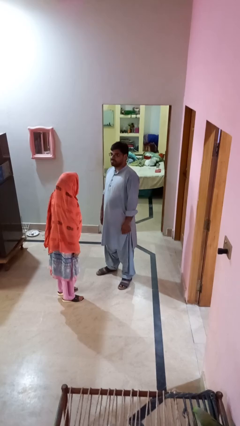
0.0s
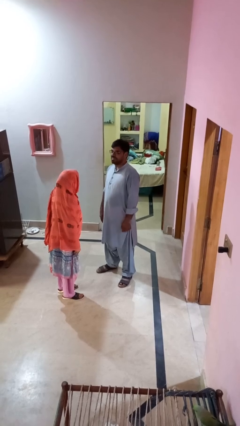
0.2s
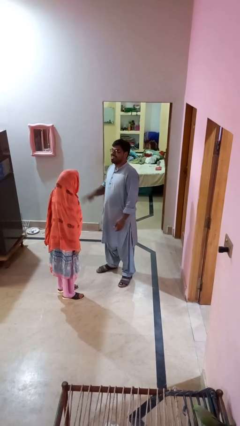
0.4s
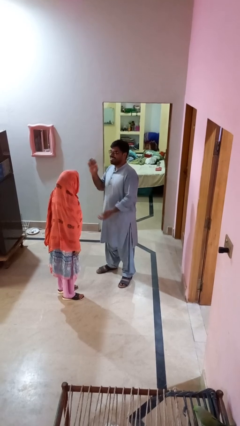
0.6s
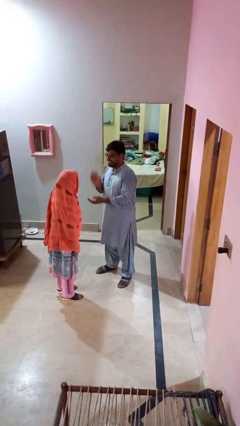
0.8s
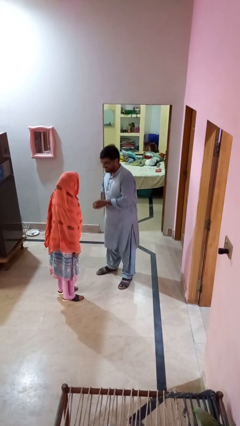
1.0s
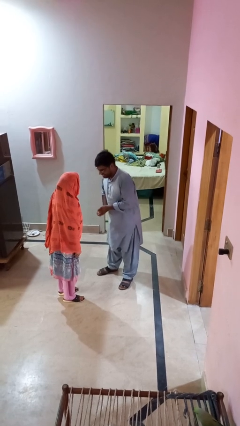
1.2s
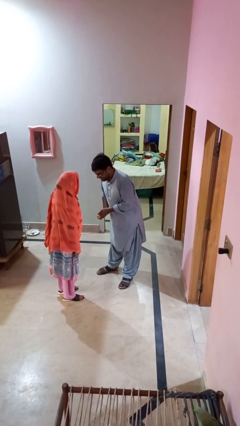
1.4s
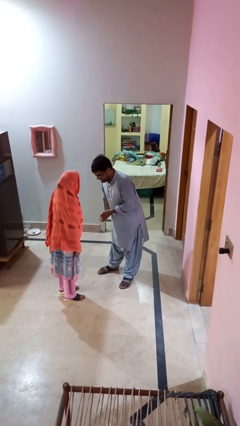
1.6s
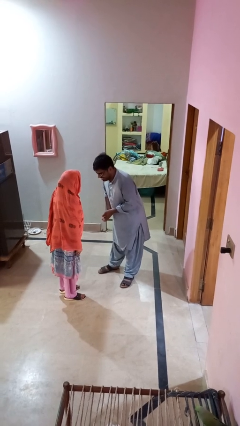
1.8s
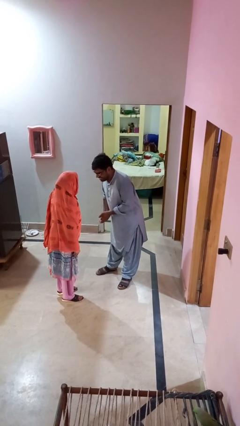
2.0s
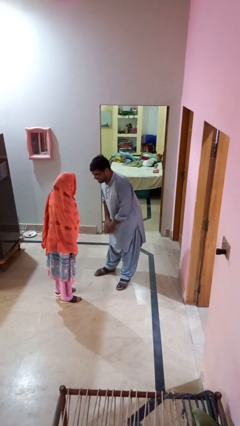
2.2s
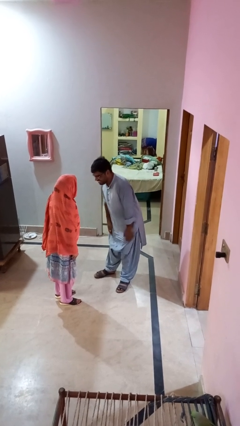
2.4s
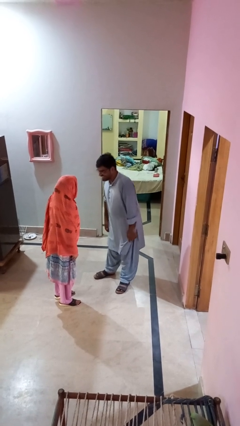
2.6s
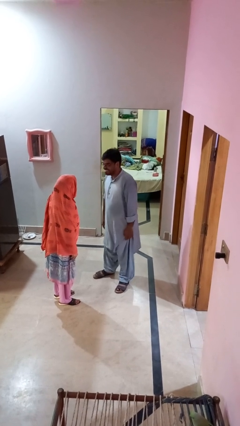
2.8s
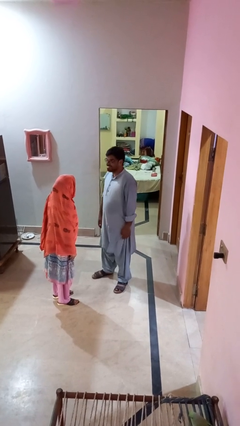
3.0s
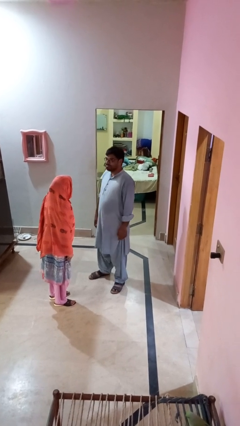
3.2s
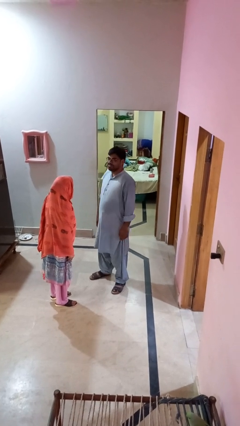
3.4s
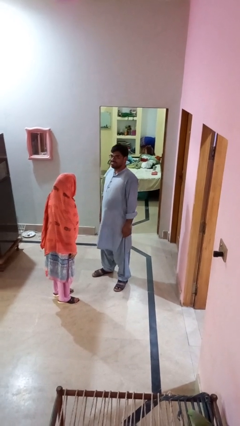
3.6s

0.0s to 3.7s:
person laughs with person

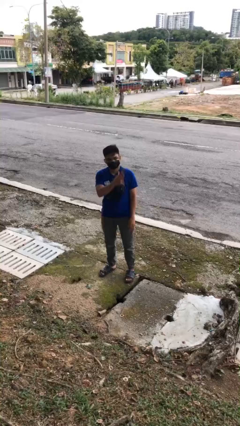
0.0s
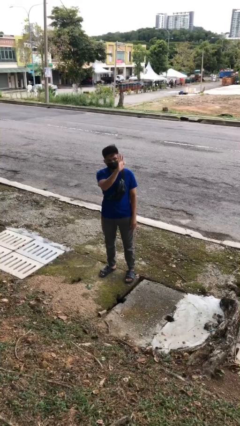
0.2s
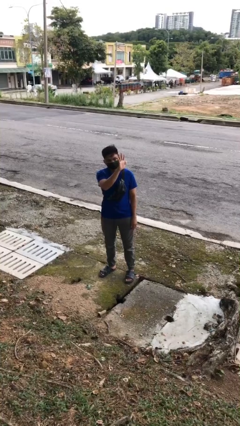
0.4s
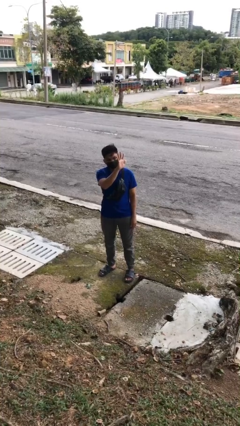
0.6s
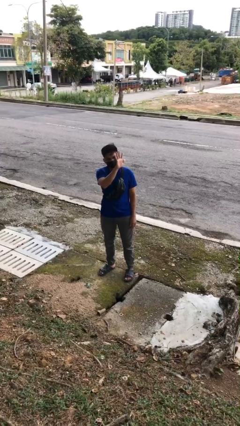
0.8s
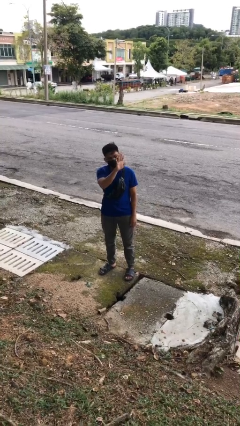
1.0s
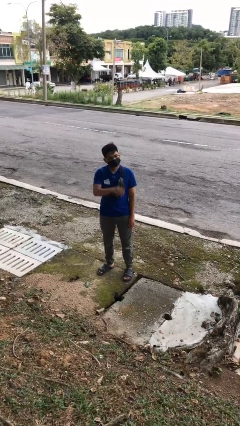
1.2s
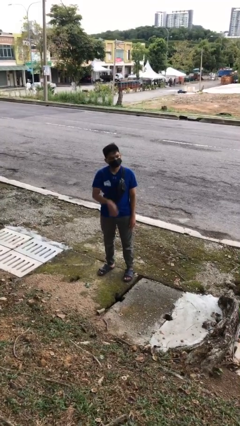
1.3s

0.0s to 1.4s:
person gestures number five

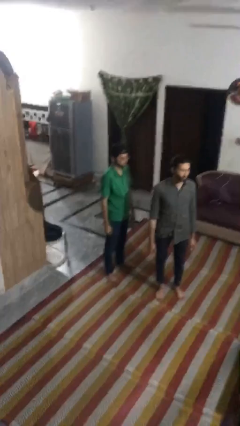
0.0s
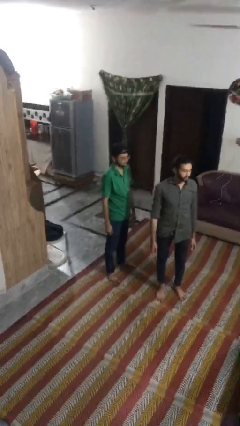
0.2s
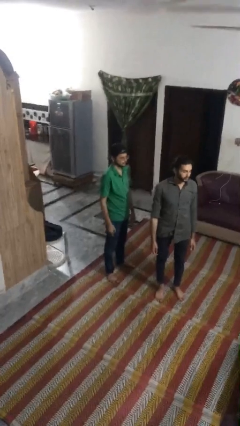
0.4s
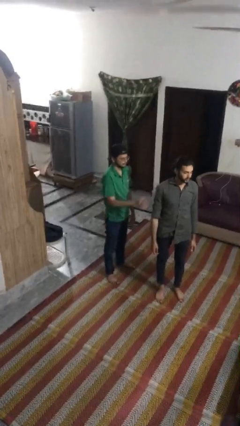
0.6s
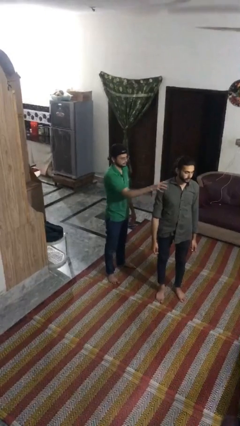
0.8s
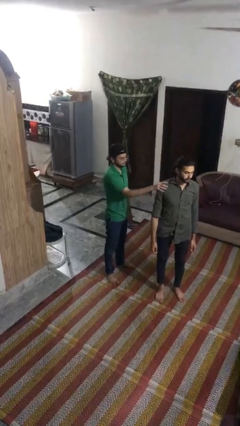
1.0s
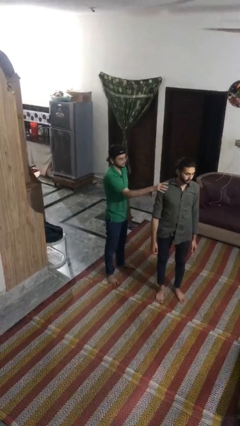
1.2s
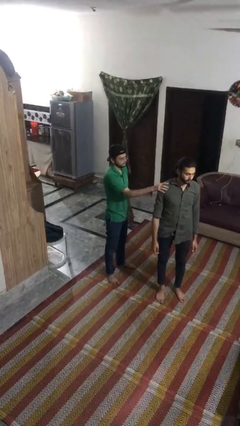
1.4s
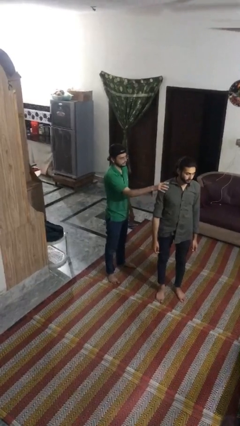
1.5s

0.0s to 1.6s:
person grabs person by shoulder

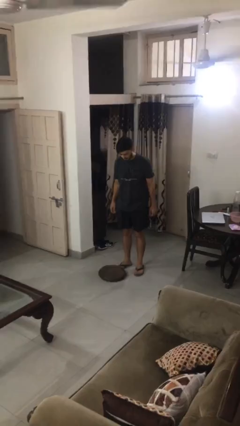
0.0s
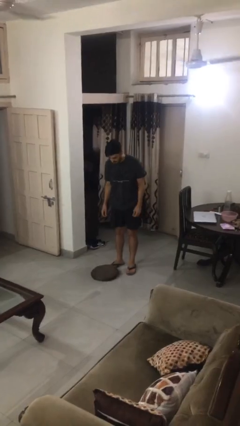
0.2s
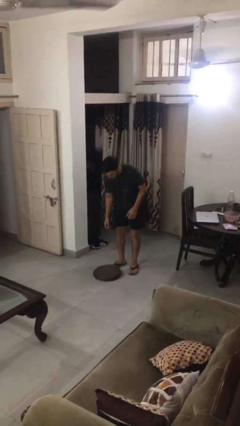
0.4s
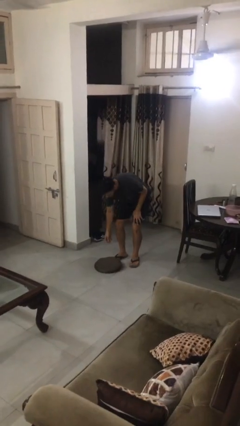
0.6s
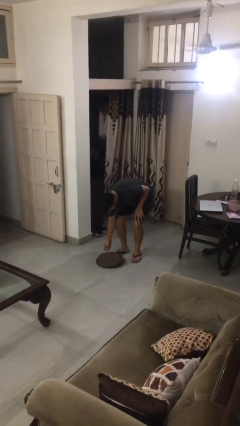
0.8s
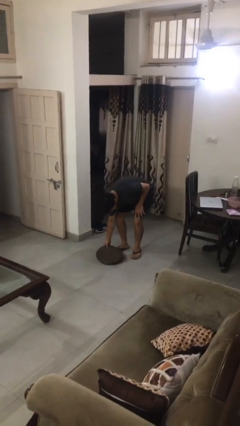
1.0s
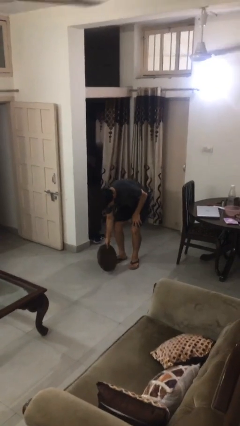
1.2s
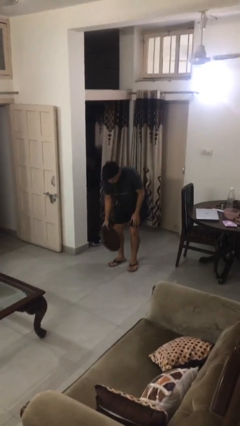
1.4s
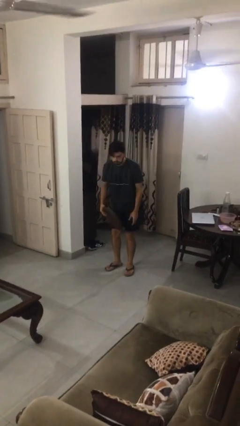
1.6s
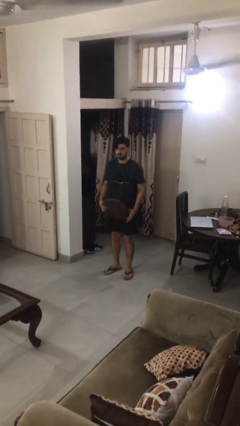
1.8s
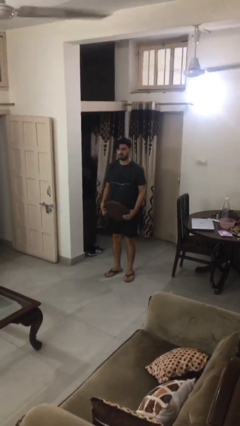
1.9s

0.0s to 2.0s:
person picks up object from floor

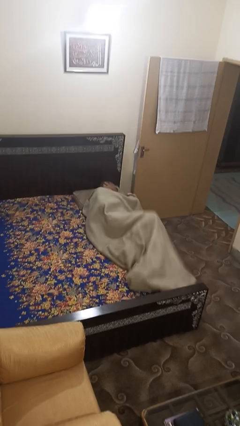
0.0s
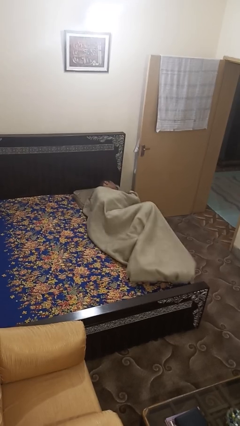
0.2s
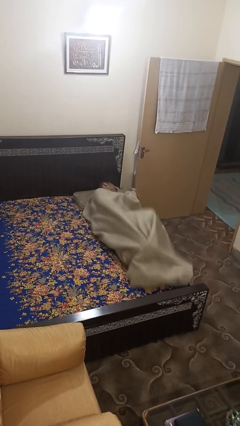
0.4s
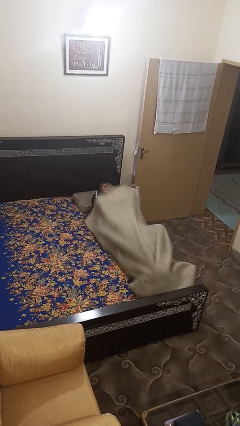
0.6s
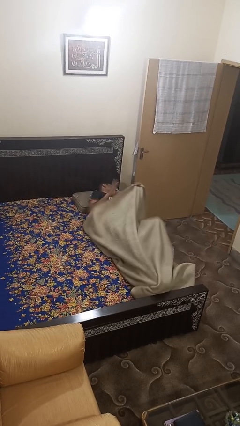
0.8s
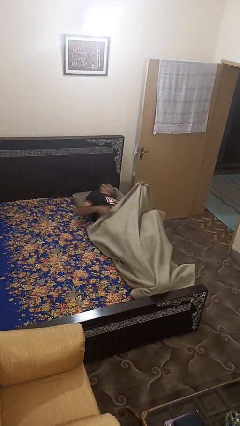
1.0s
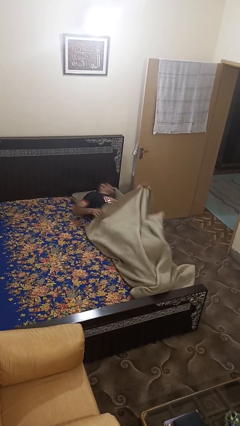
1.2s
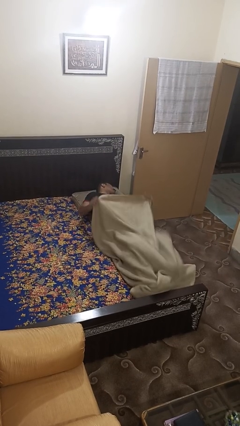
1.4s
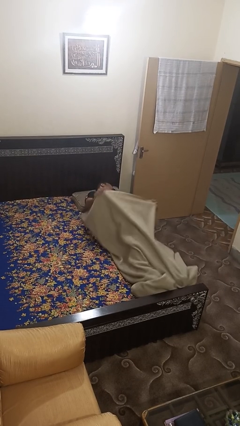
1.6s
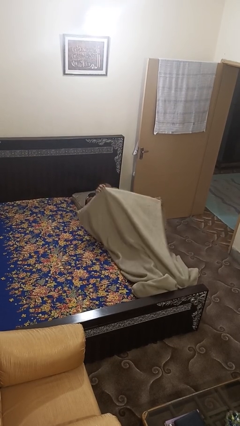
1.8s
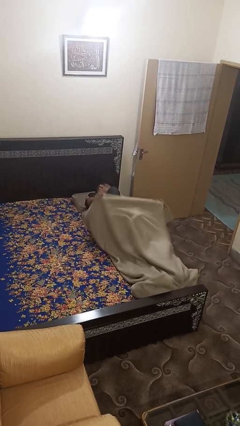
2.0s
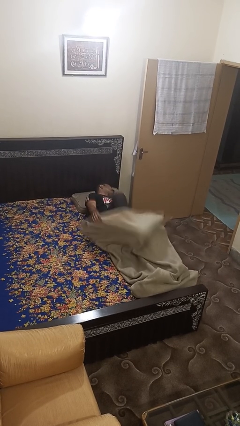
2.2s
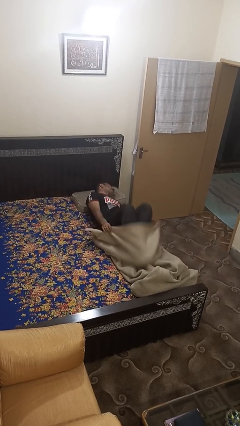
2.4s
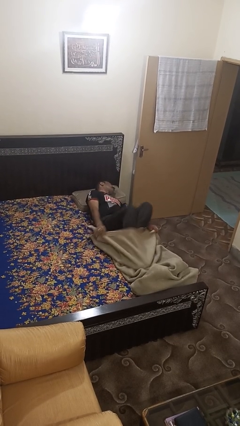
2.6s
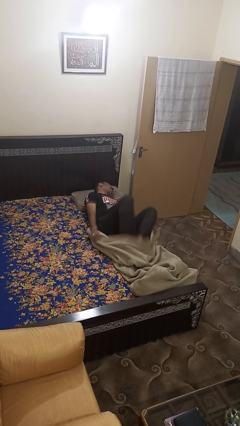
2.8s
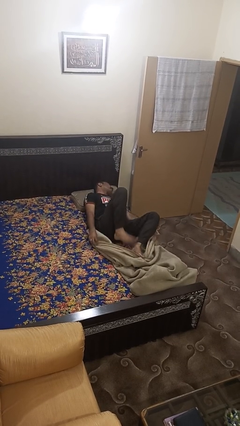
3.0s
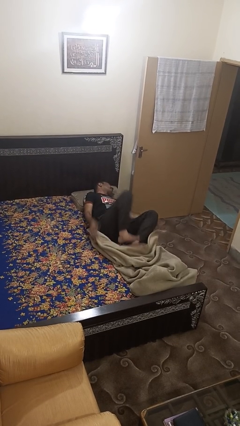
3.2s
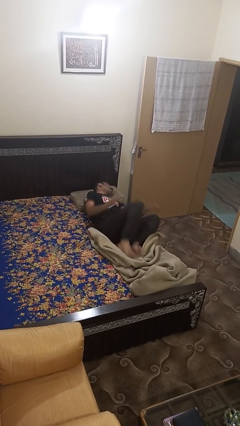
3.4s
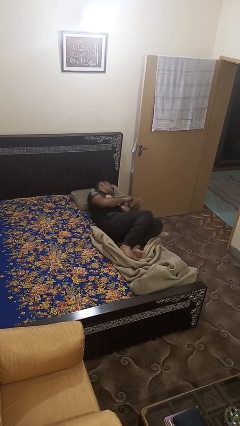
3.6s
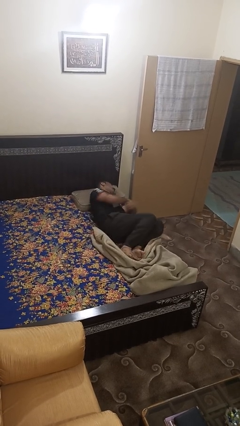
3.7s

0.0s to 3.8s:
person uncovers with bedsheets

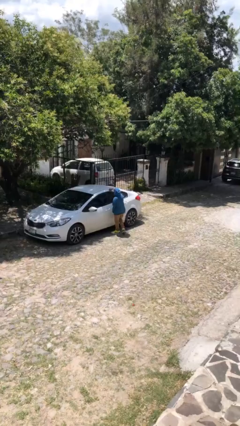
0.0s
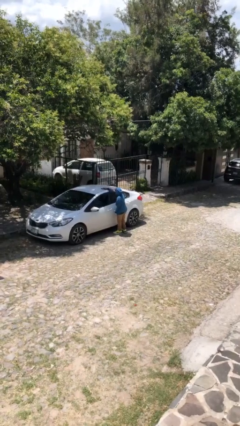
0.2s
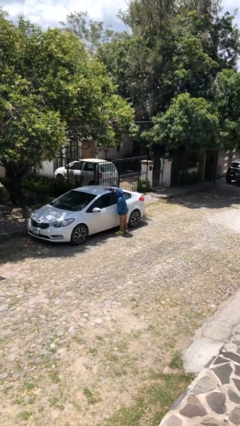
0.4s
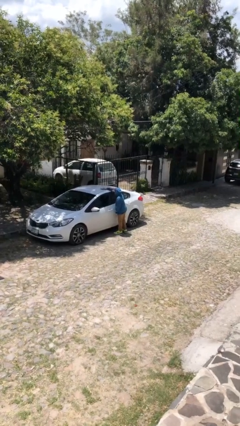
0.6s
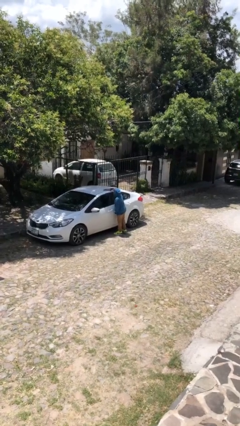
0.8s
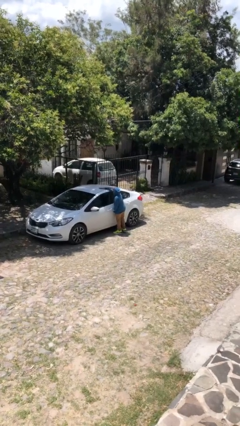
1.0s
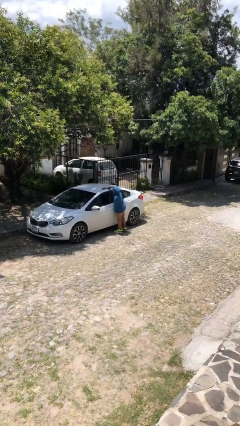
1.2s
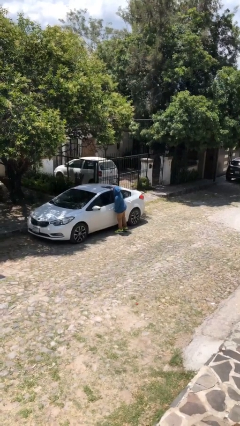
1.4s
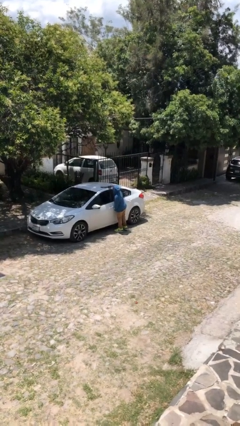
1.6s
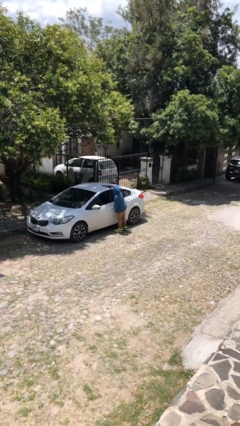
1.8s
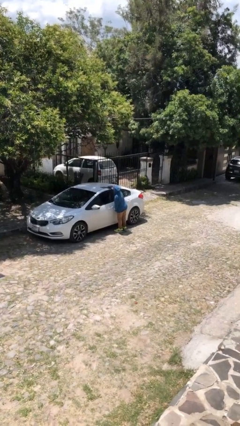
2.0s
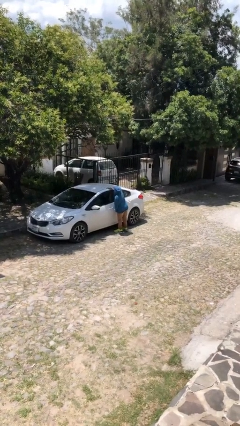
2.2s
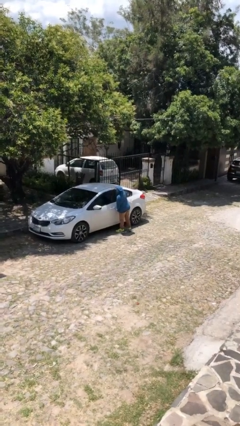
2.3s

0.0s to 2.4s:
person polishes car with rag

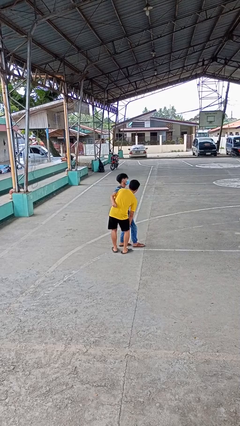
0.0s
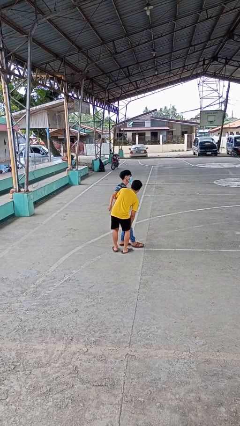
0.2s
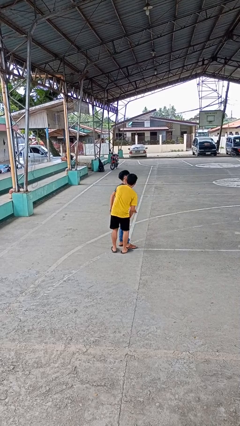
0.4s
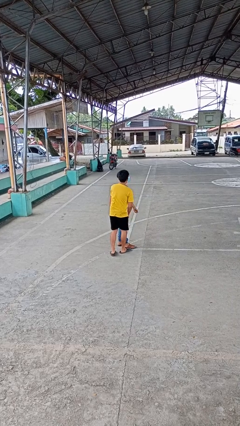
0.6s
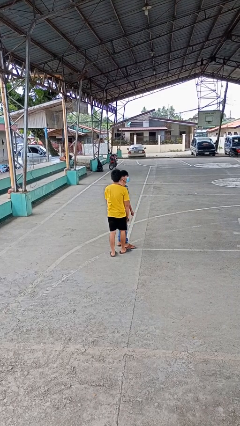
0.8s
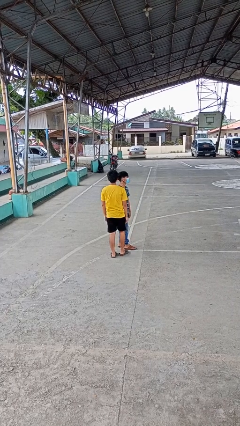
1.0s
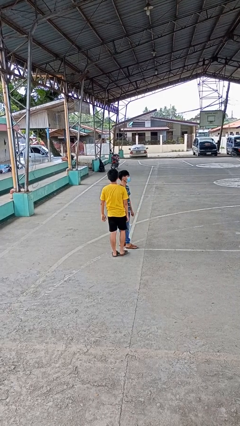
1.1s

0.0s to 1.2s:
person puts down person

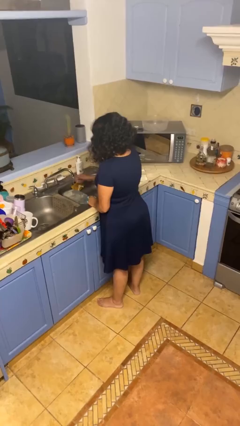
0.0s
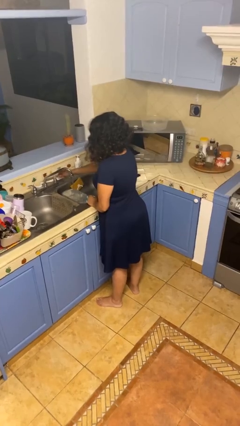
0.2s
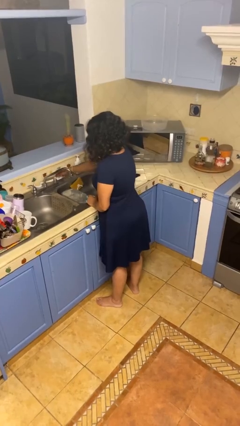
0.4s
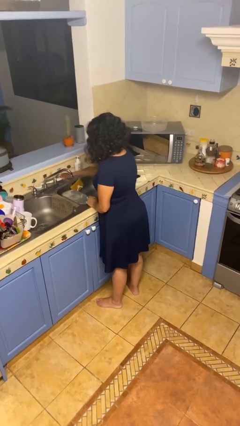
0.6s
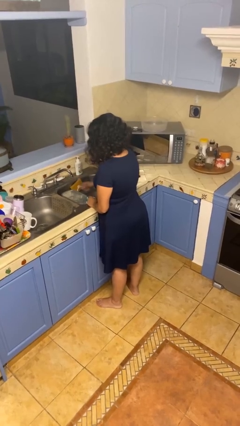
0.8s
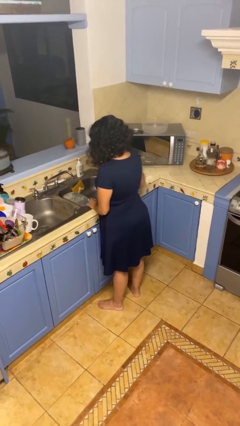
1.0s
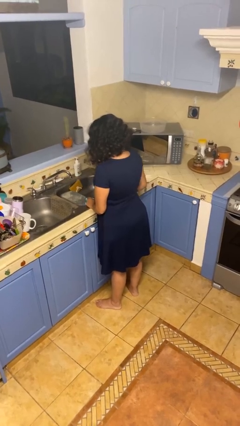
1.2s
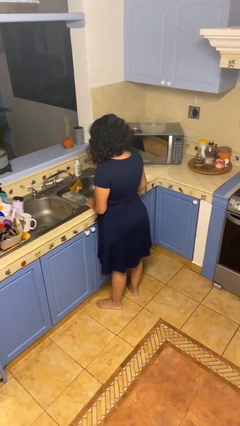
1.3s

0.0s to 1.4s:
person turns off faucet
